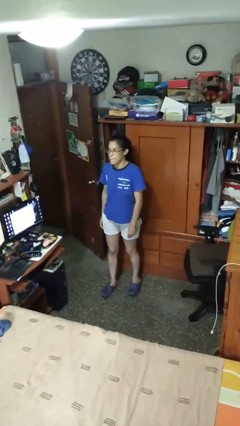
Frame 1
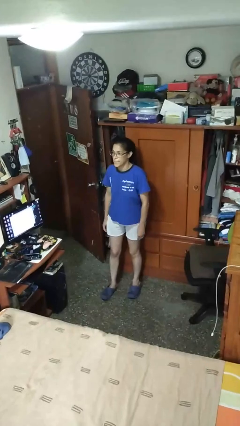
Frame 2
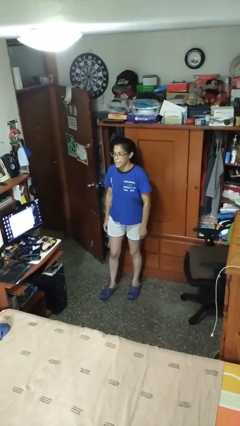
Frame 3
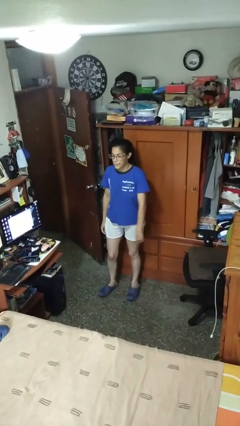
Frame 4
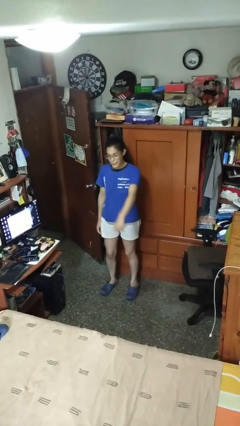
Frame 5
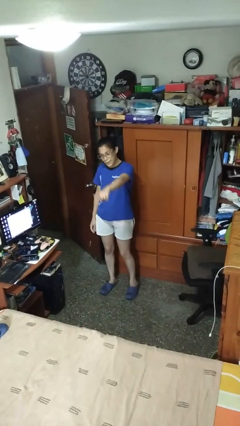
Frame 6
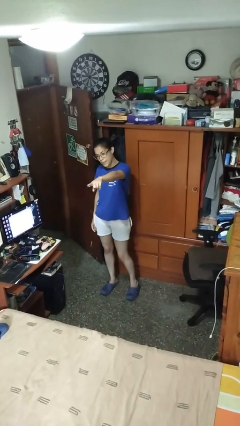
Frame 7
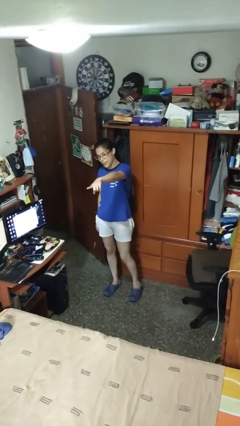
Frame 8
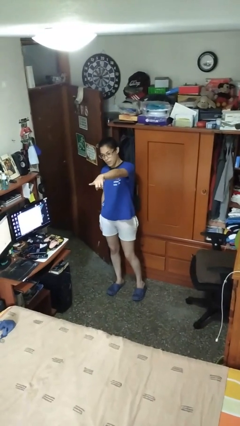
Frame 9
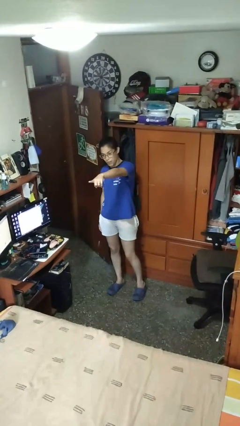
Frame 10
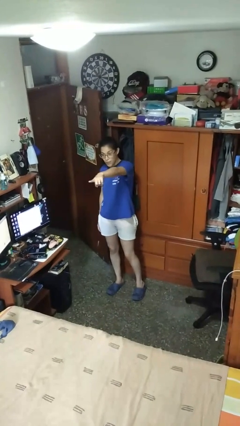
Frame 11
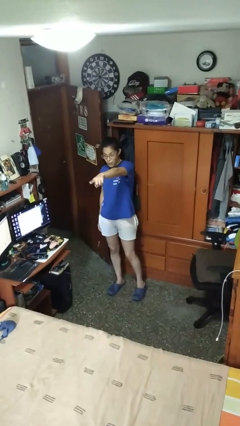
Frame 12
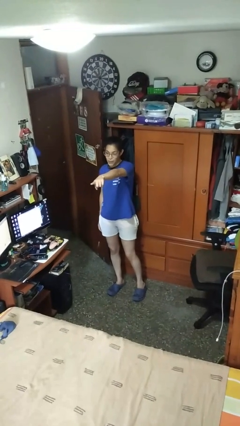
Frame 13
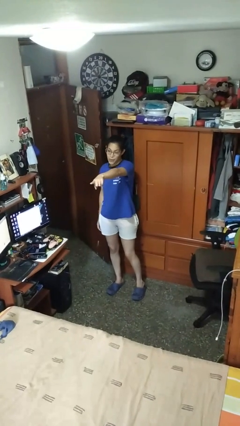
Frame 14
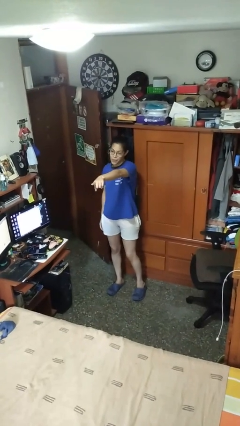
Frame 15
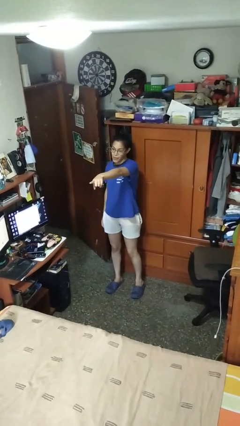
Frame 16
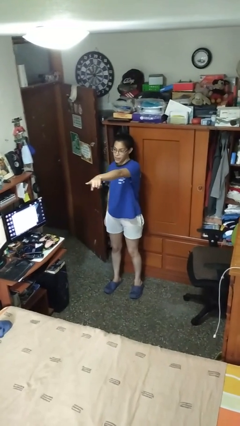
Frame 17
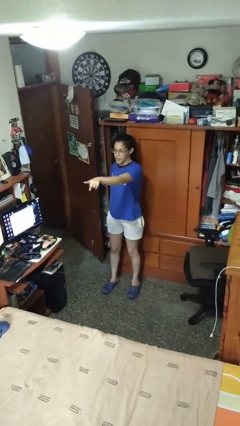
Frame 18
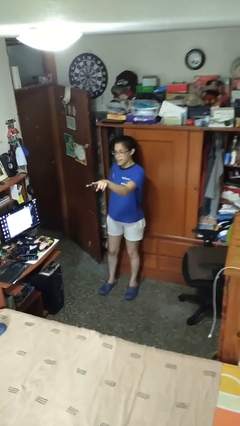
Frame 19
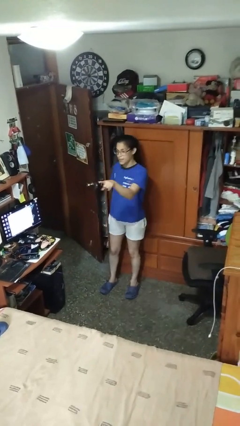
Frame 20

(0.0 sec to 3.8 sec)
person points at person

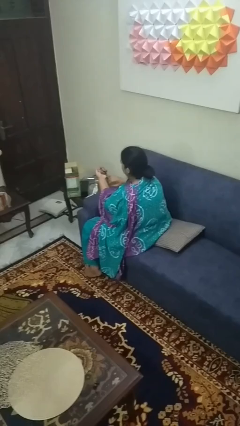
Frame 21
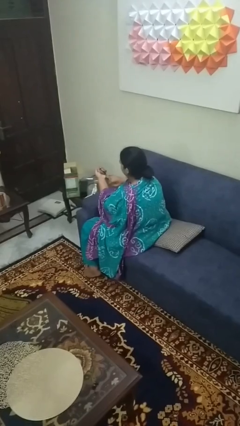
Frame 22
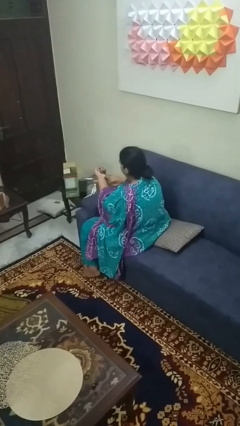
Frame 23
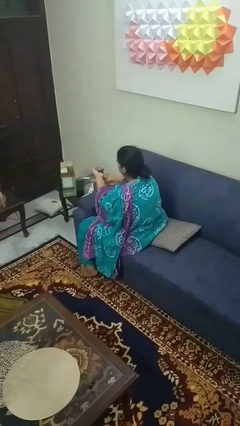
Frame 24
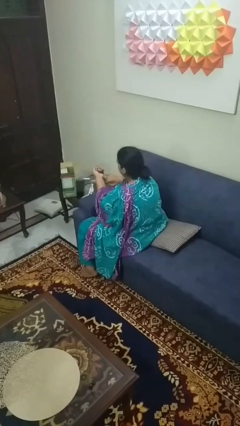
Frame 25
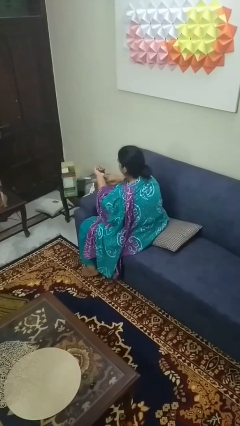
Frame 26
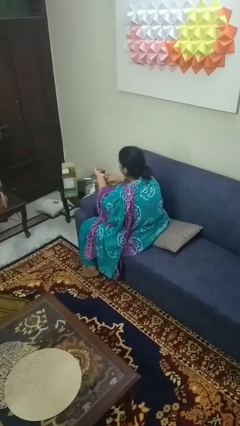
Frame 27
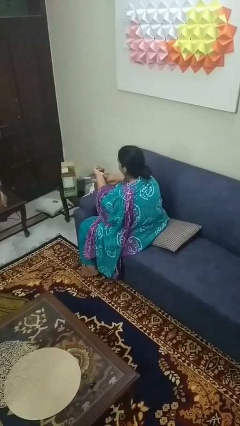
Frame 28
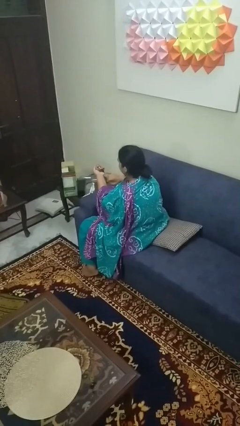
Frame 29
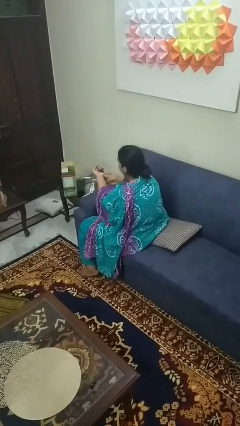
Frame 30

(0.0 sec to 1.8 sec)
person clips fingernails

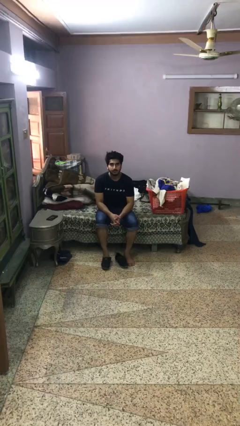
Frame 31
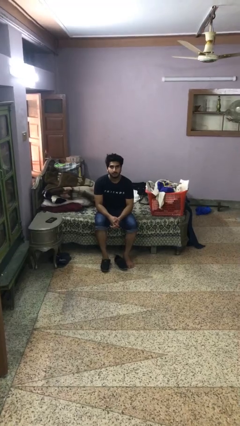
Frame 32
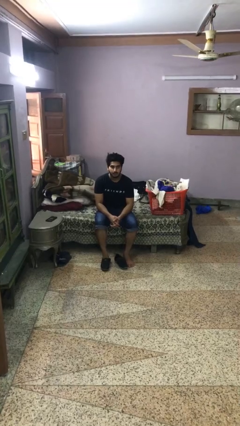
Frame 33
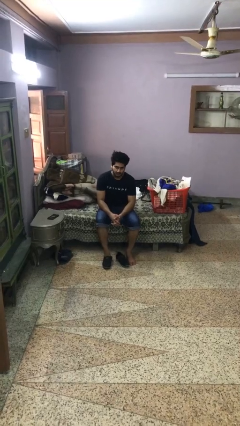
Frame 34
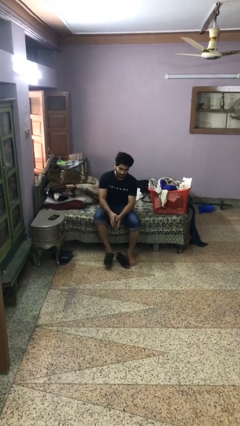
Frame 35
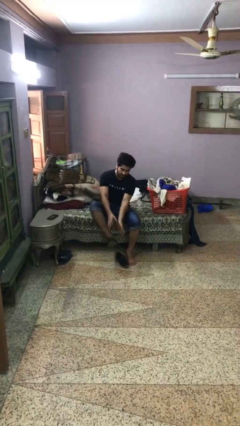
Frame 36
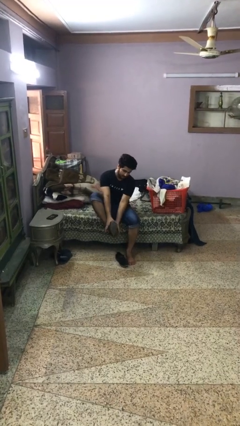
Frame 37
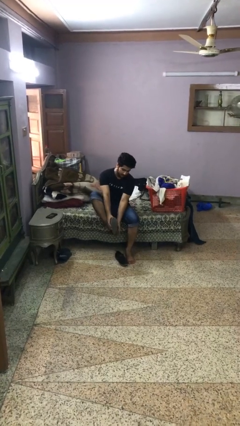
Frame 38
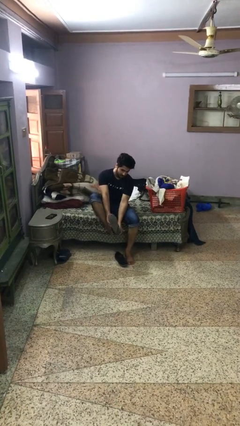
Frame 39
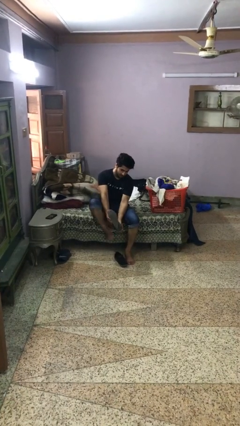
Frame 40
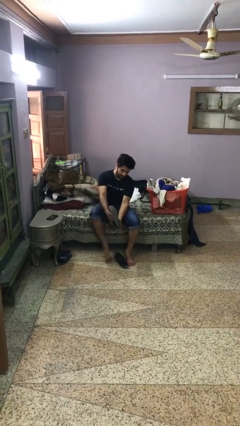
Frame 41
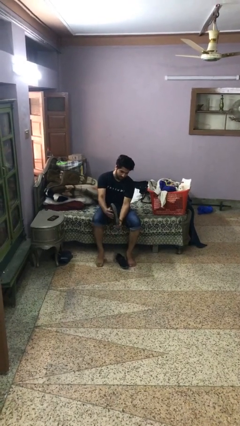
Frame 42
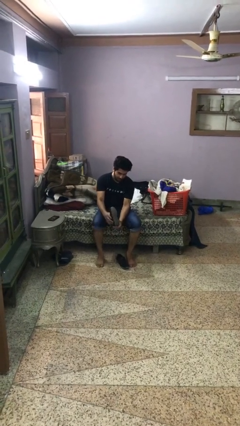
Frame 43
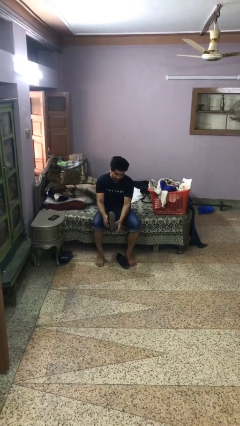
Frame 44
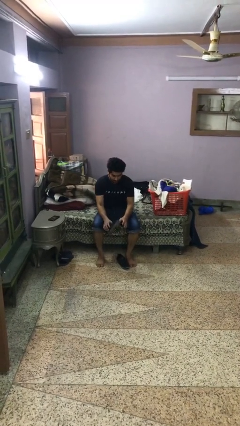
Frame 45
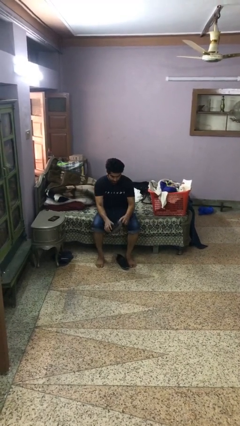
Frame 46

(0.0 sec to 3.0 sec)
person takes off boots

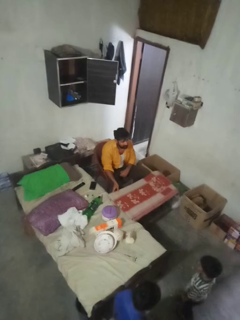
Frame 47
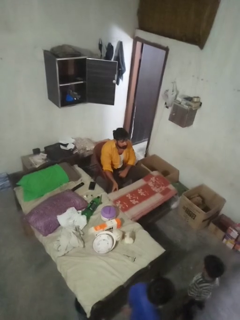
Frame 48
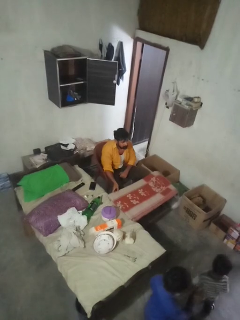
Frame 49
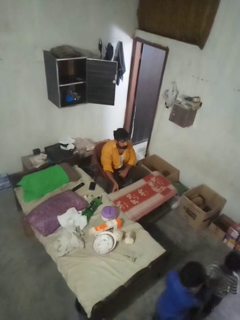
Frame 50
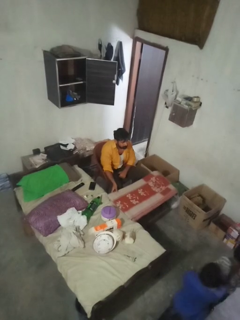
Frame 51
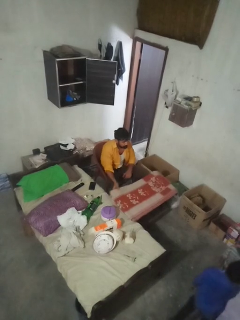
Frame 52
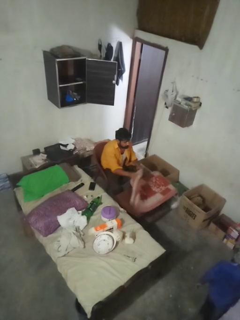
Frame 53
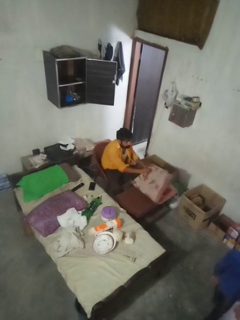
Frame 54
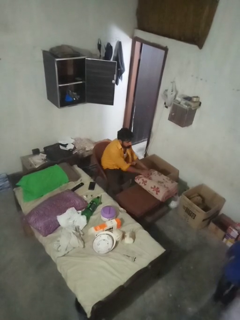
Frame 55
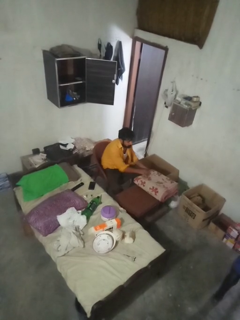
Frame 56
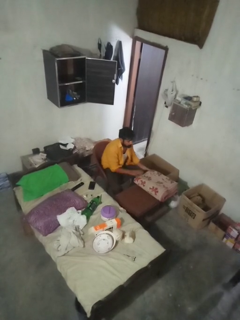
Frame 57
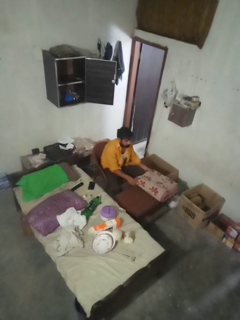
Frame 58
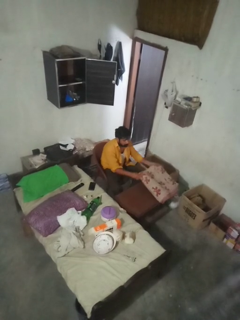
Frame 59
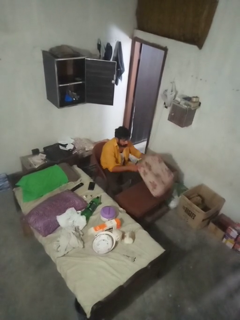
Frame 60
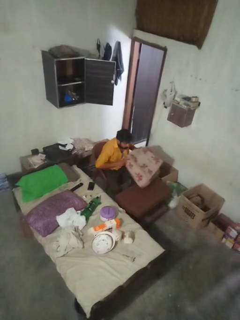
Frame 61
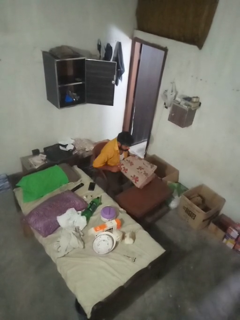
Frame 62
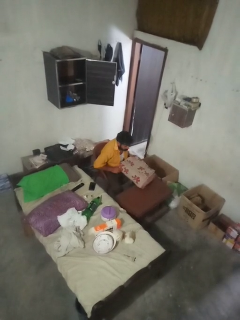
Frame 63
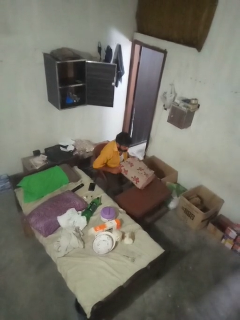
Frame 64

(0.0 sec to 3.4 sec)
person folds tablecloth

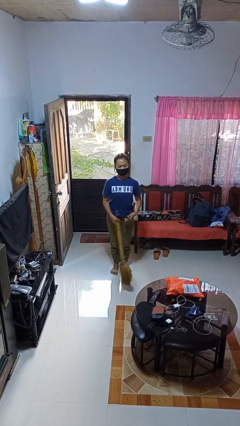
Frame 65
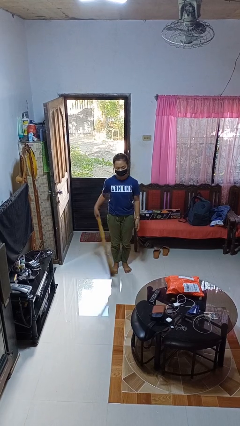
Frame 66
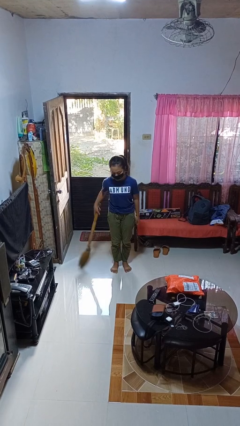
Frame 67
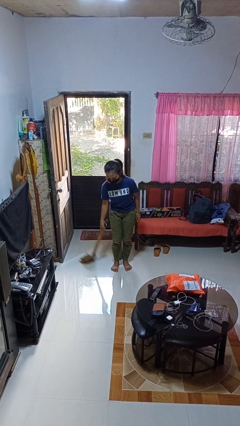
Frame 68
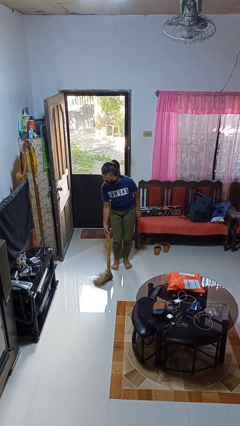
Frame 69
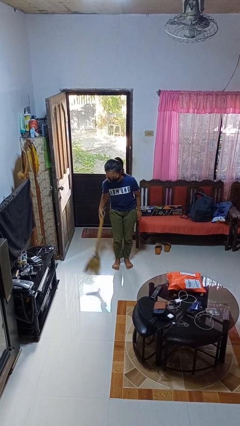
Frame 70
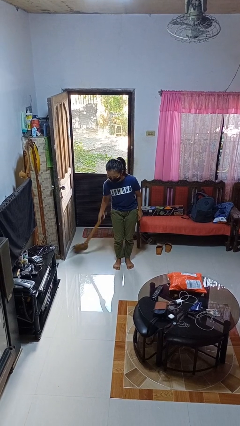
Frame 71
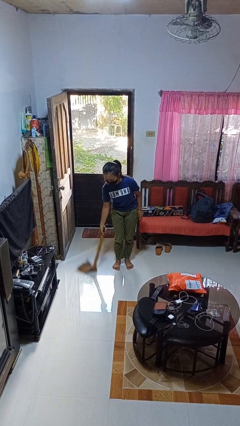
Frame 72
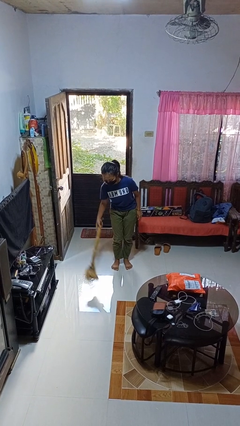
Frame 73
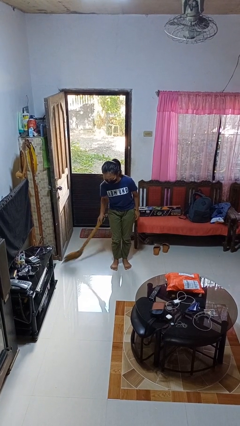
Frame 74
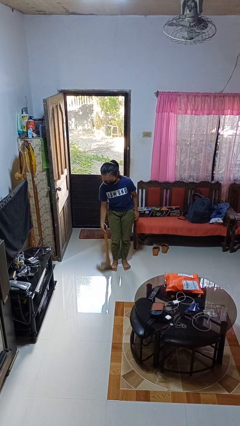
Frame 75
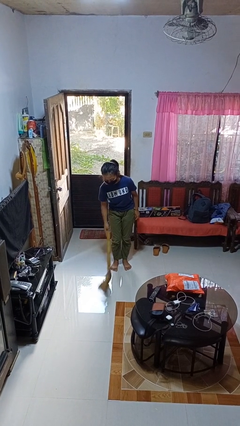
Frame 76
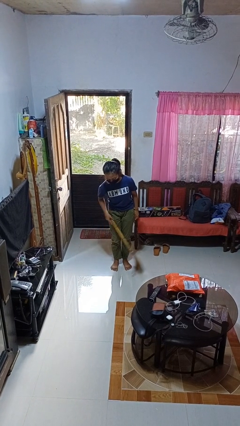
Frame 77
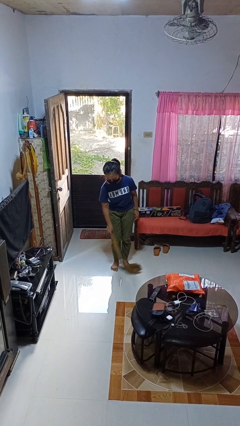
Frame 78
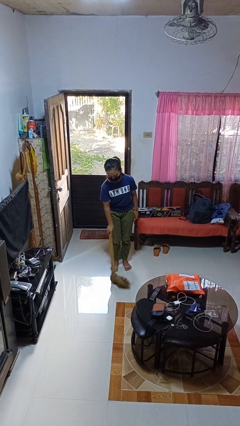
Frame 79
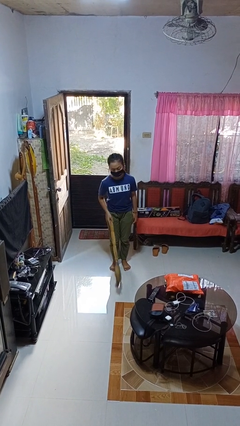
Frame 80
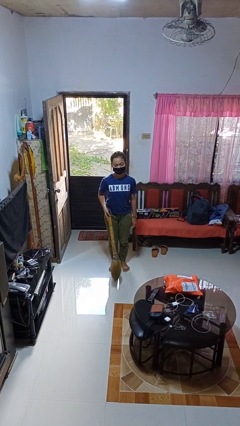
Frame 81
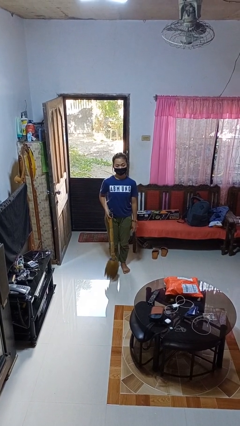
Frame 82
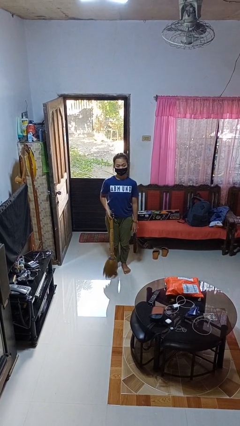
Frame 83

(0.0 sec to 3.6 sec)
person sweeps floor

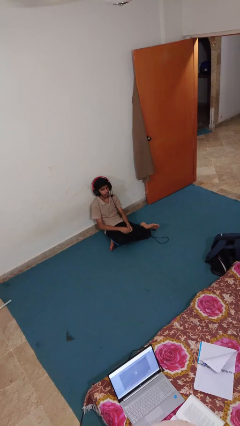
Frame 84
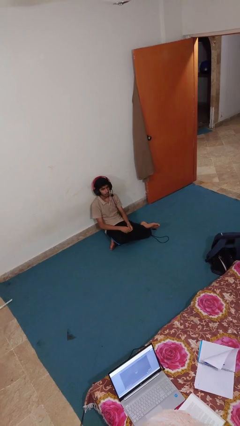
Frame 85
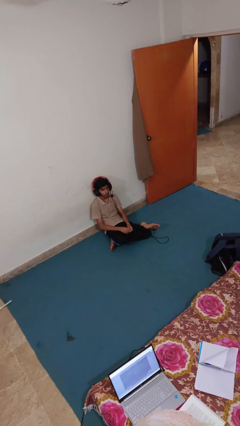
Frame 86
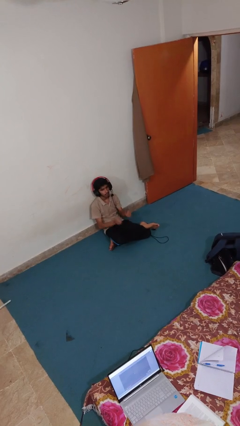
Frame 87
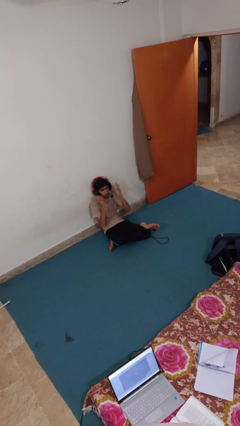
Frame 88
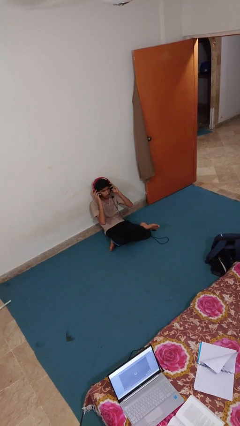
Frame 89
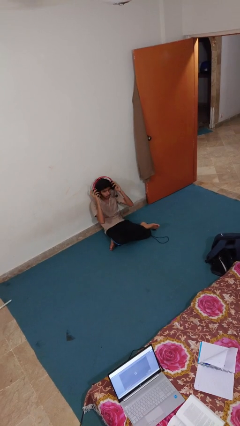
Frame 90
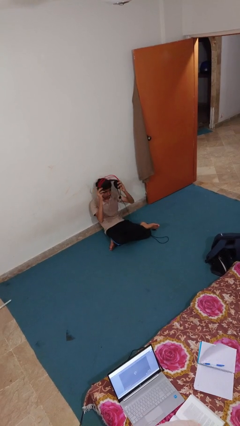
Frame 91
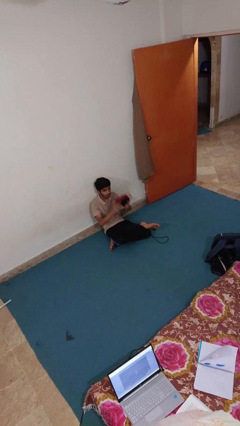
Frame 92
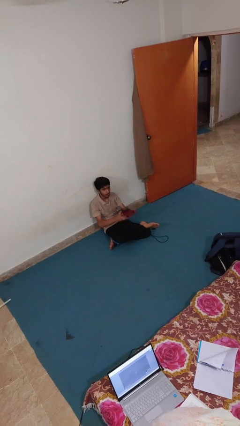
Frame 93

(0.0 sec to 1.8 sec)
person puts on headphones

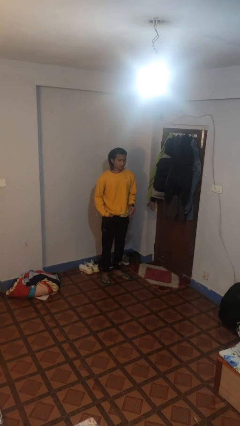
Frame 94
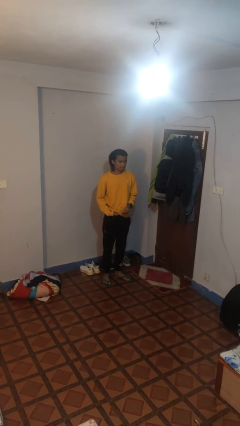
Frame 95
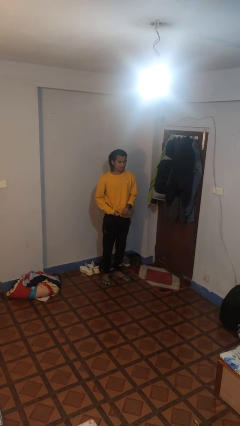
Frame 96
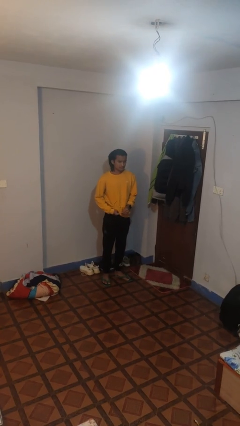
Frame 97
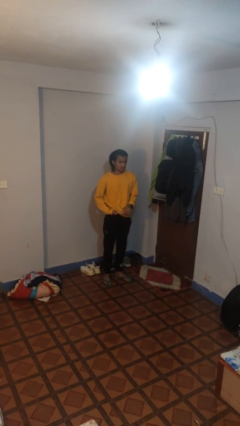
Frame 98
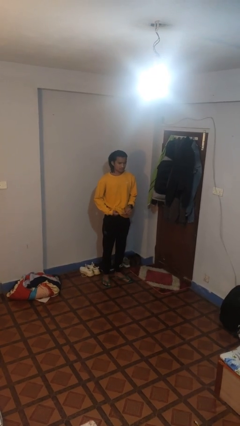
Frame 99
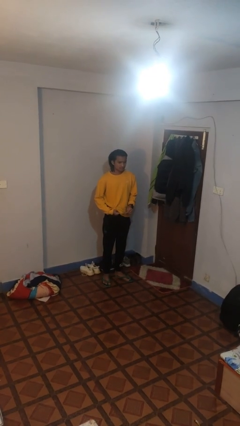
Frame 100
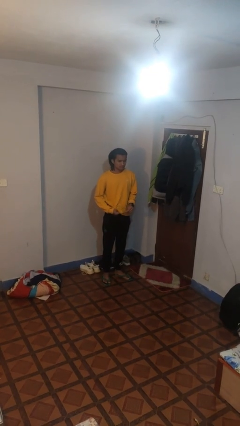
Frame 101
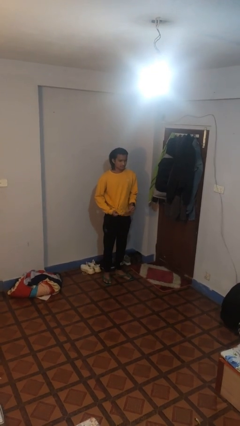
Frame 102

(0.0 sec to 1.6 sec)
person cleans eyeglasses
